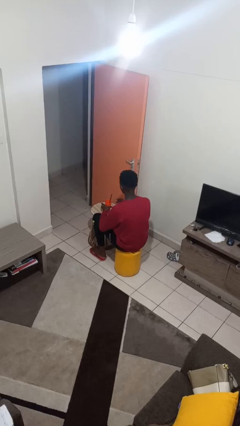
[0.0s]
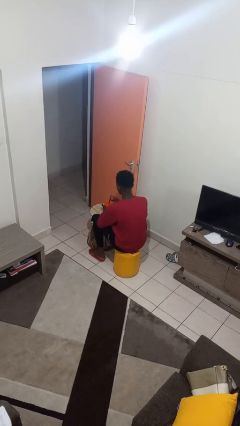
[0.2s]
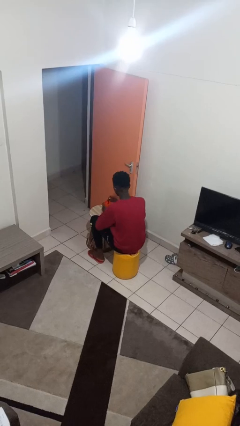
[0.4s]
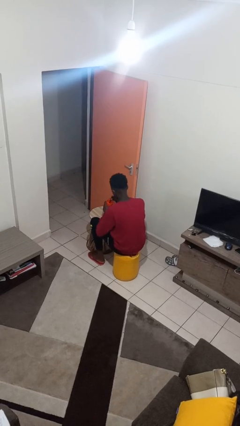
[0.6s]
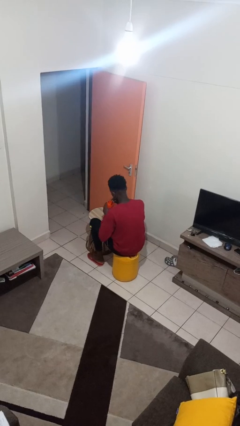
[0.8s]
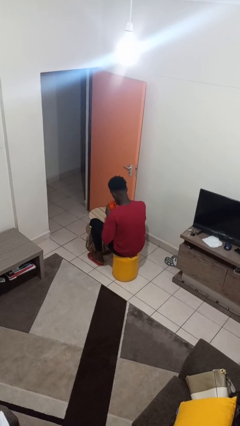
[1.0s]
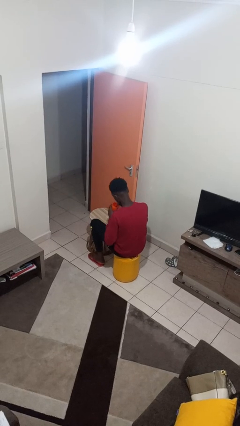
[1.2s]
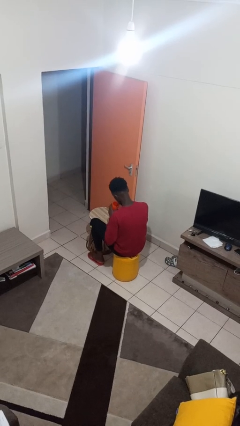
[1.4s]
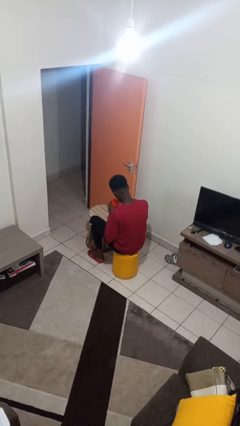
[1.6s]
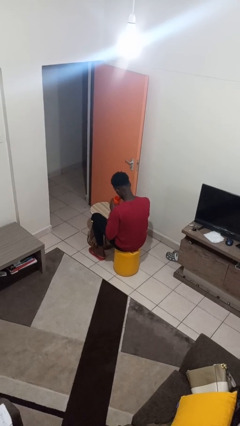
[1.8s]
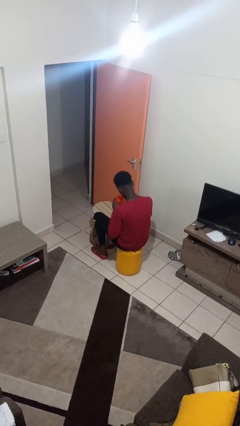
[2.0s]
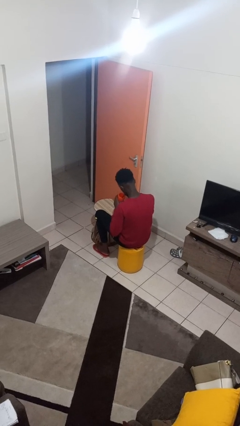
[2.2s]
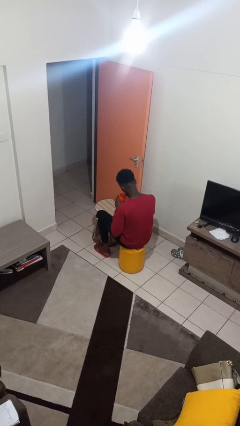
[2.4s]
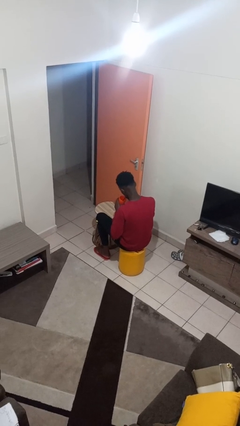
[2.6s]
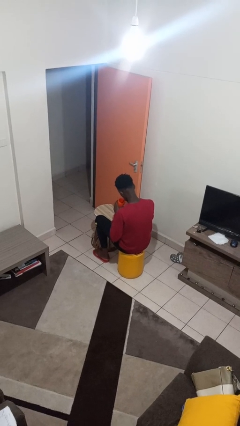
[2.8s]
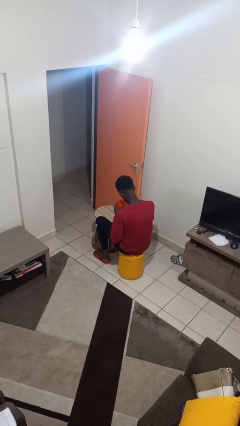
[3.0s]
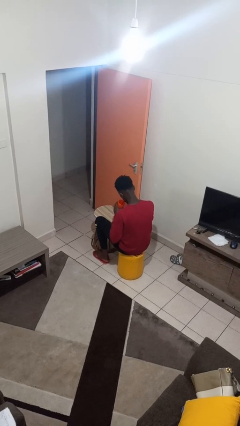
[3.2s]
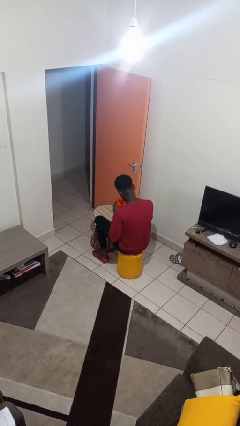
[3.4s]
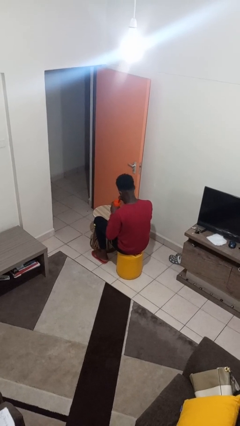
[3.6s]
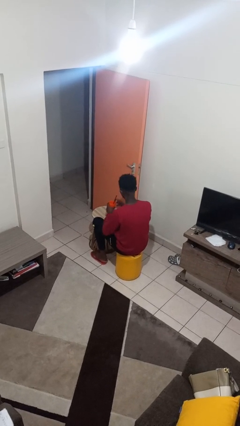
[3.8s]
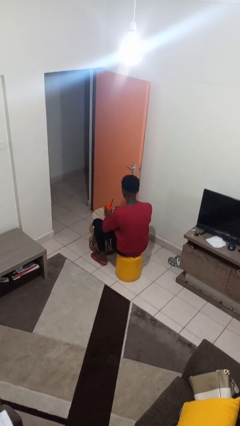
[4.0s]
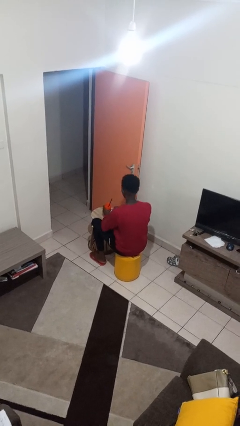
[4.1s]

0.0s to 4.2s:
person drinks from straw

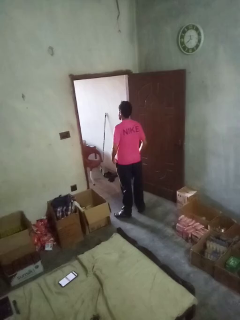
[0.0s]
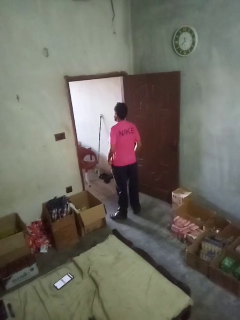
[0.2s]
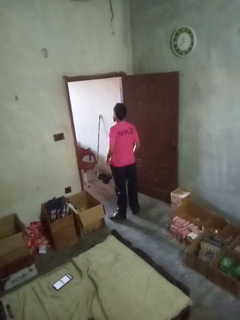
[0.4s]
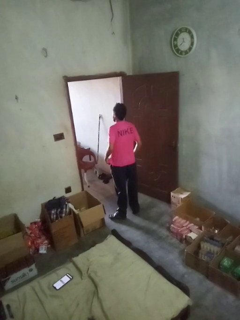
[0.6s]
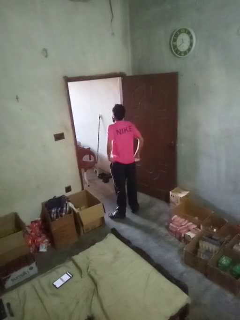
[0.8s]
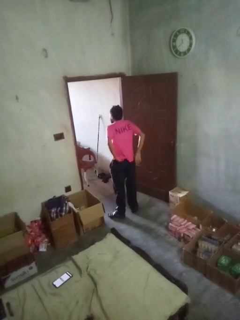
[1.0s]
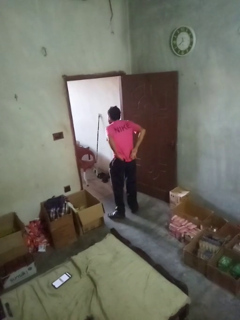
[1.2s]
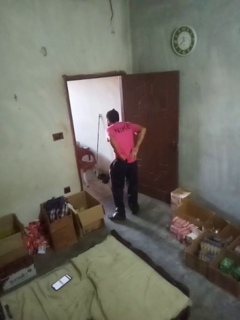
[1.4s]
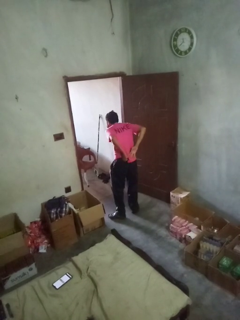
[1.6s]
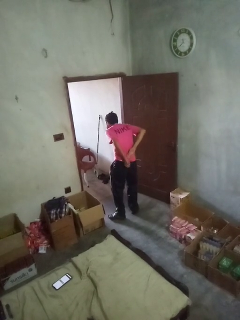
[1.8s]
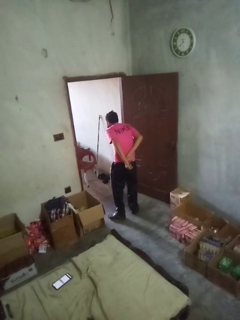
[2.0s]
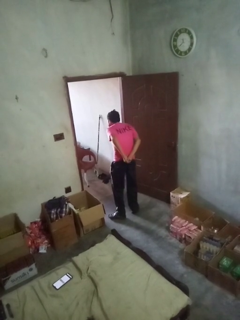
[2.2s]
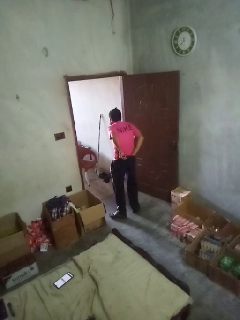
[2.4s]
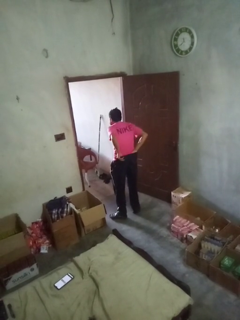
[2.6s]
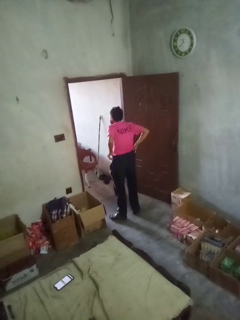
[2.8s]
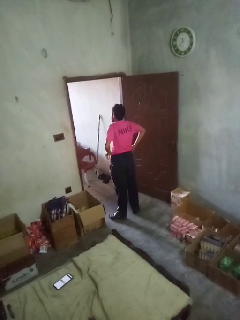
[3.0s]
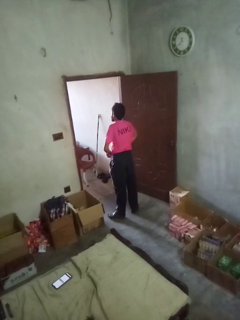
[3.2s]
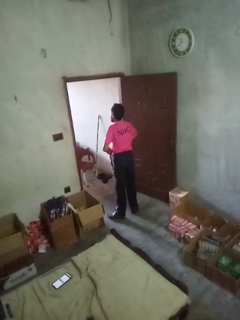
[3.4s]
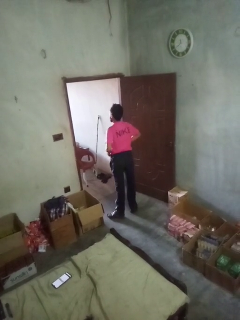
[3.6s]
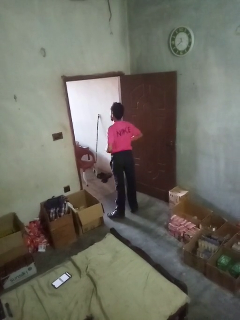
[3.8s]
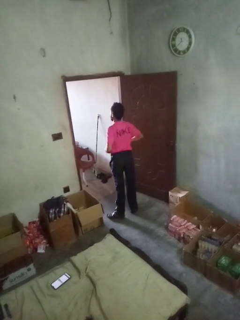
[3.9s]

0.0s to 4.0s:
person tucks in shirt

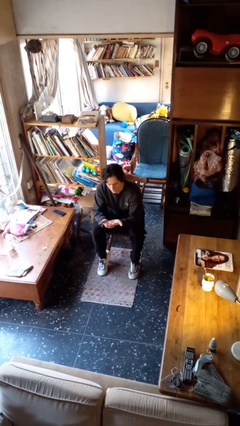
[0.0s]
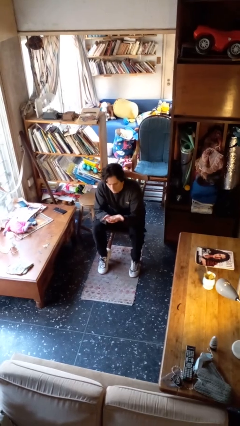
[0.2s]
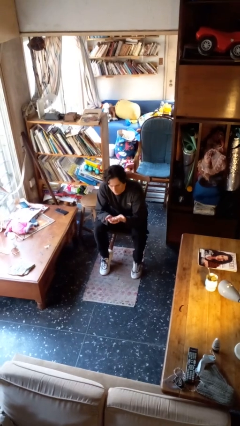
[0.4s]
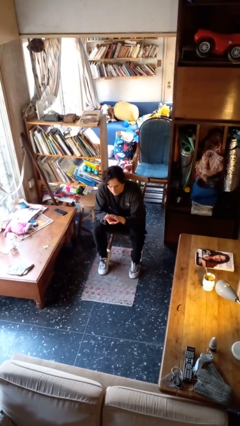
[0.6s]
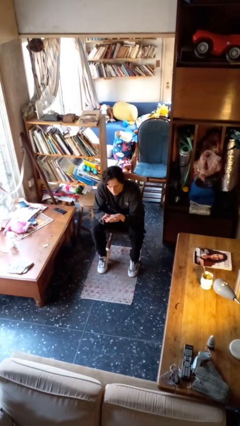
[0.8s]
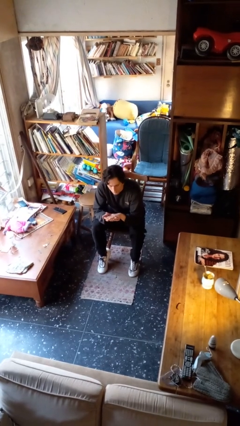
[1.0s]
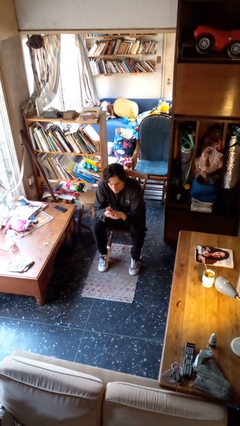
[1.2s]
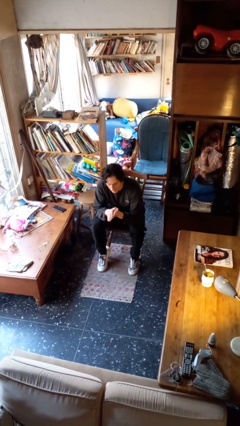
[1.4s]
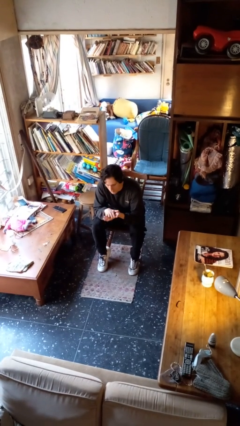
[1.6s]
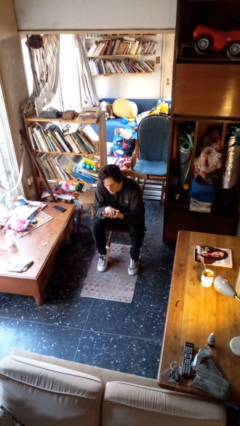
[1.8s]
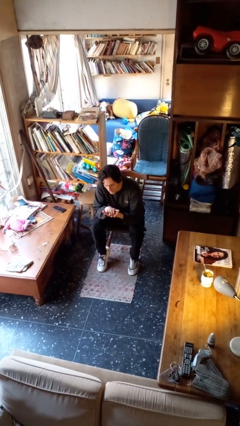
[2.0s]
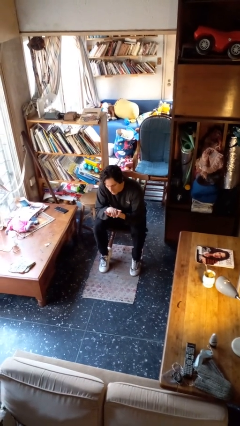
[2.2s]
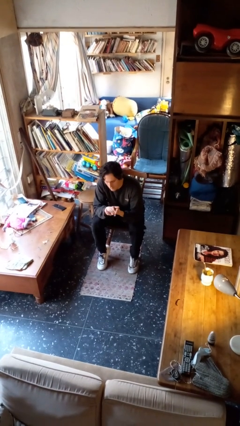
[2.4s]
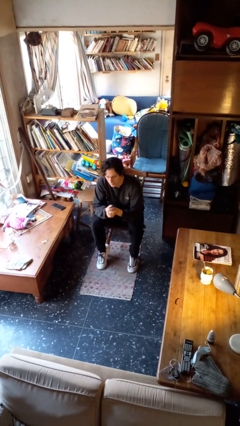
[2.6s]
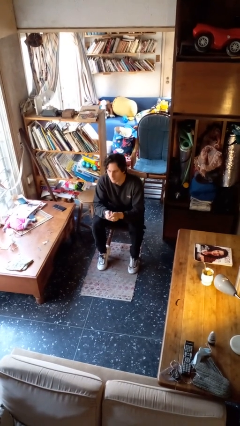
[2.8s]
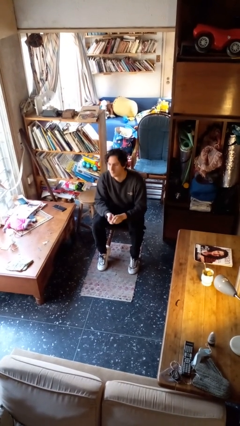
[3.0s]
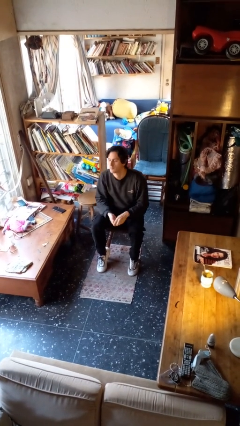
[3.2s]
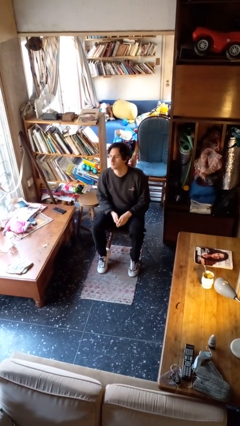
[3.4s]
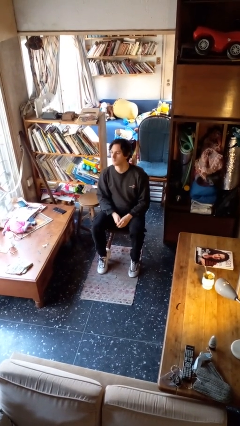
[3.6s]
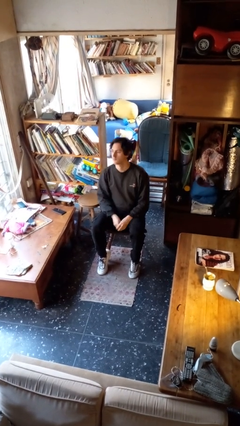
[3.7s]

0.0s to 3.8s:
person looks at hands in lap

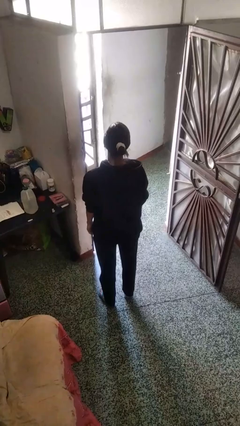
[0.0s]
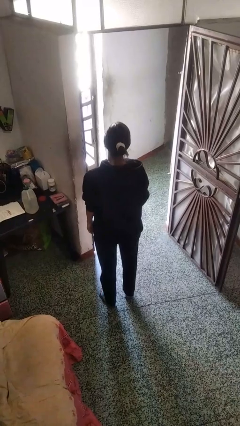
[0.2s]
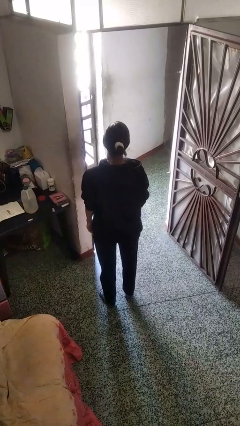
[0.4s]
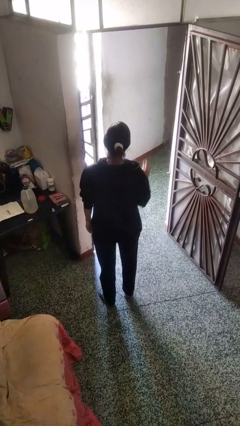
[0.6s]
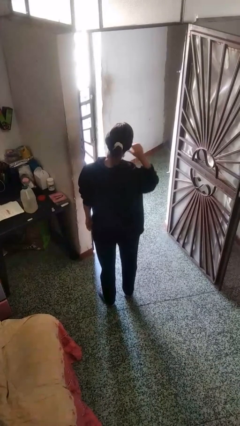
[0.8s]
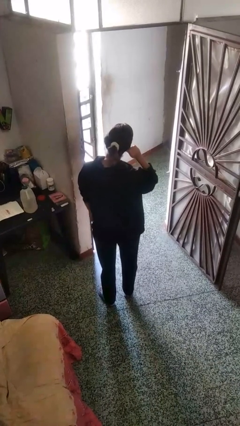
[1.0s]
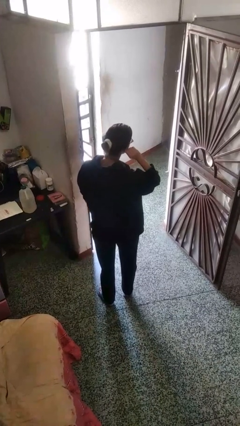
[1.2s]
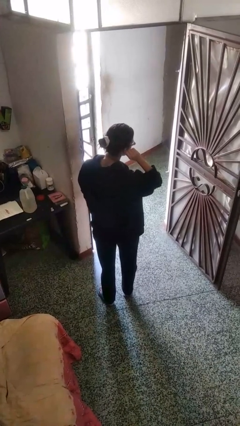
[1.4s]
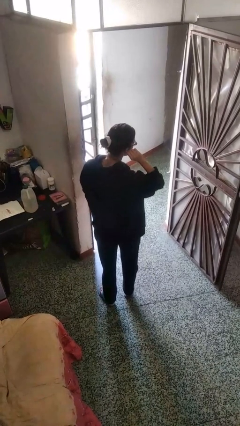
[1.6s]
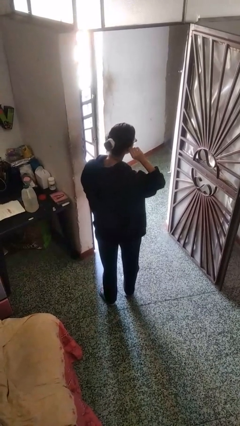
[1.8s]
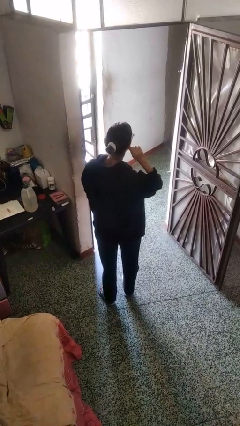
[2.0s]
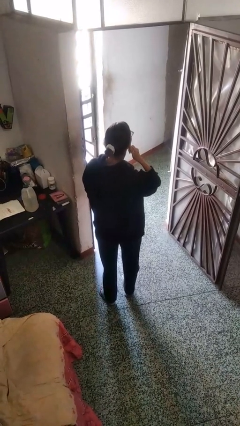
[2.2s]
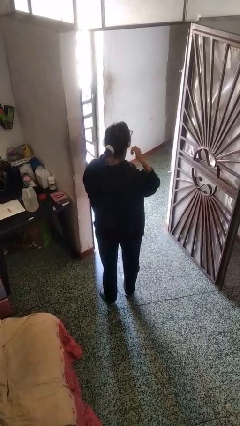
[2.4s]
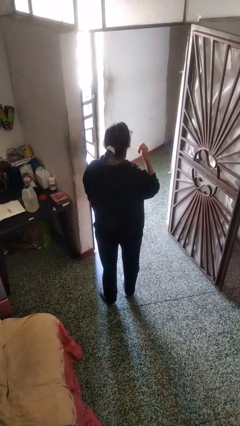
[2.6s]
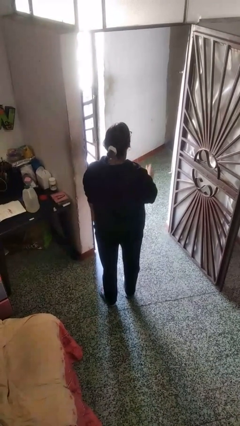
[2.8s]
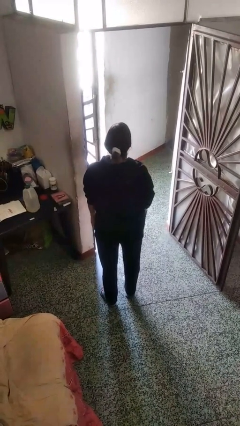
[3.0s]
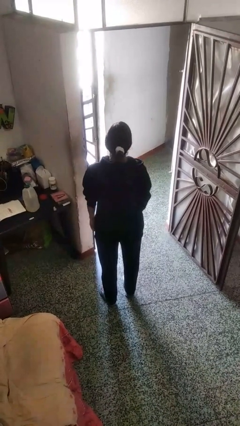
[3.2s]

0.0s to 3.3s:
person touches earlobe

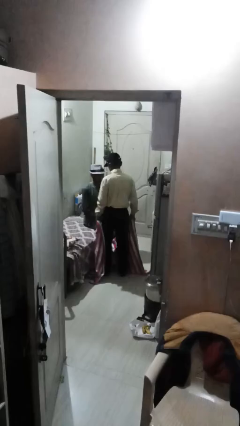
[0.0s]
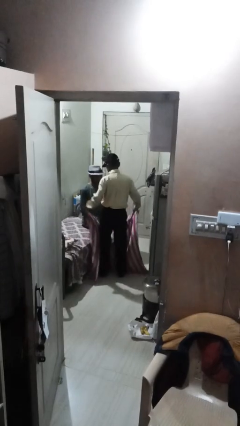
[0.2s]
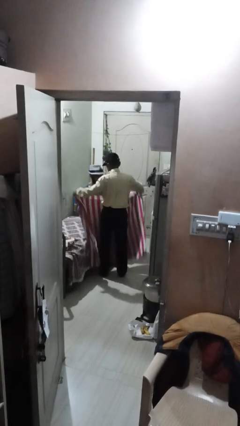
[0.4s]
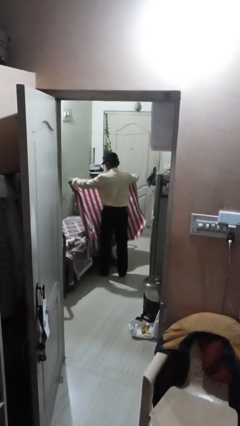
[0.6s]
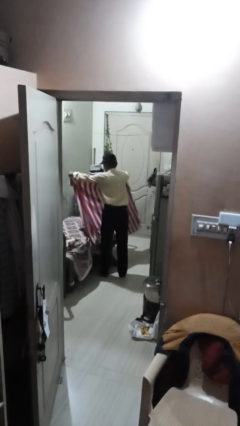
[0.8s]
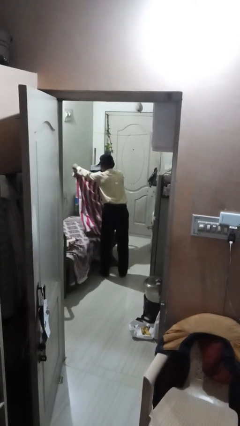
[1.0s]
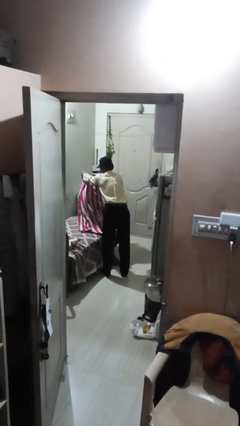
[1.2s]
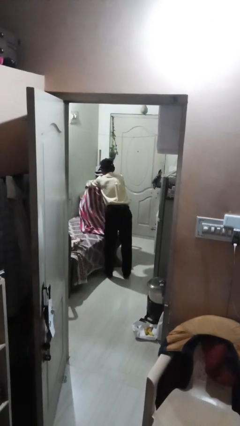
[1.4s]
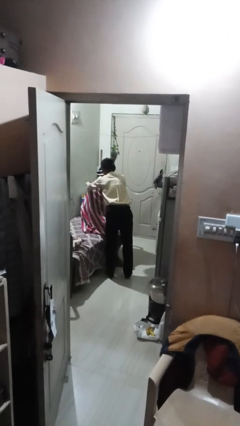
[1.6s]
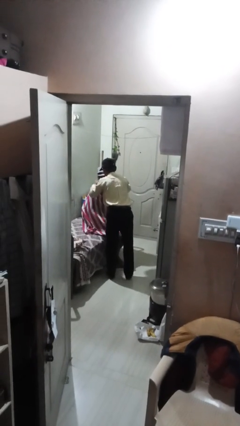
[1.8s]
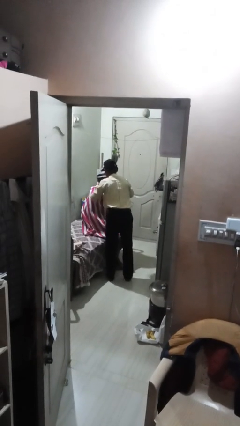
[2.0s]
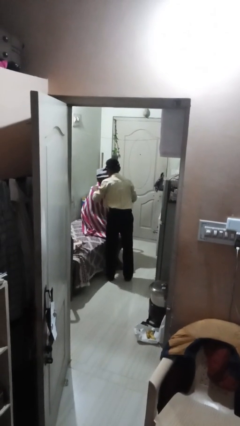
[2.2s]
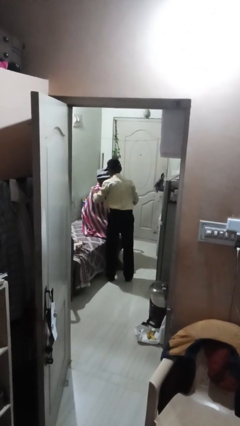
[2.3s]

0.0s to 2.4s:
person covers friend with blanket

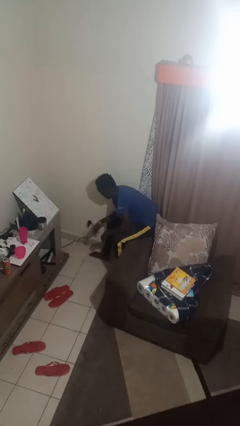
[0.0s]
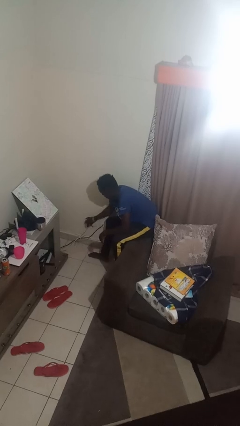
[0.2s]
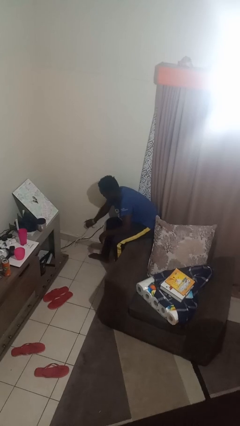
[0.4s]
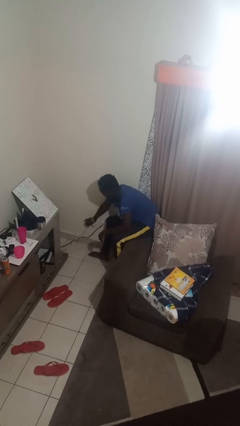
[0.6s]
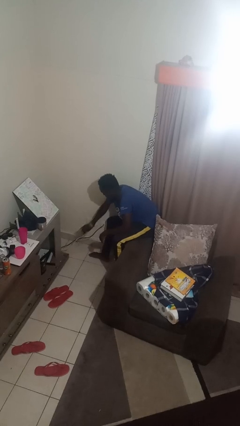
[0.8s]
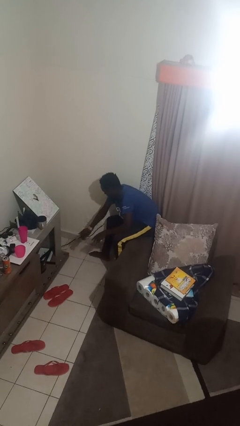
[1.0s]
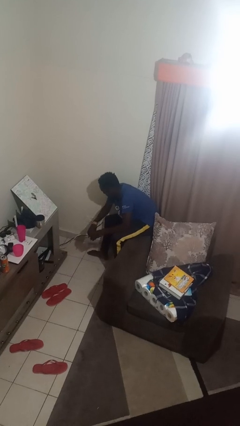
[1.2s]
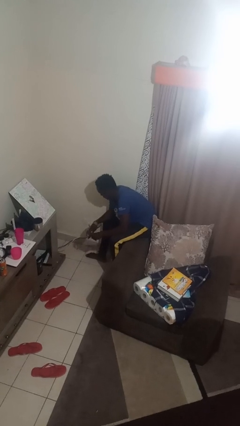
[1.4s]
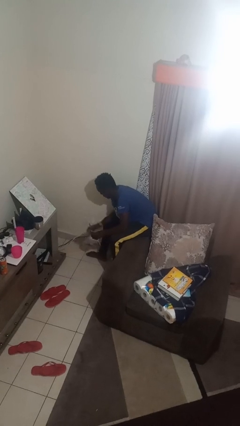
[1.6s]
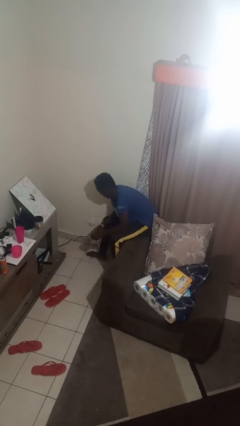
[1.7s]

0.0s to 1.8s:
person unplugs from electrical socket
